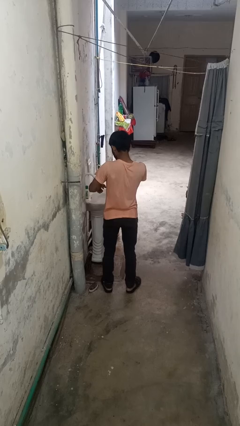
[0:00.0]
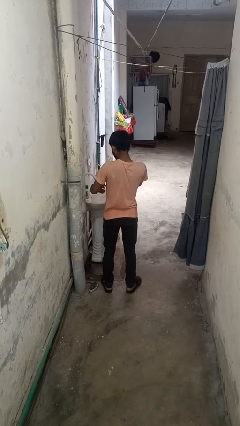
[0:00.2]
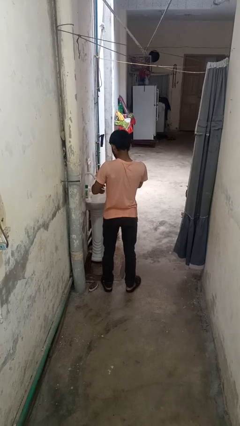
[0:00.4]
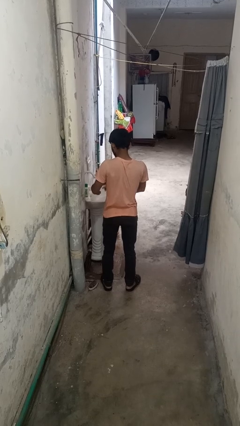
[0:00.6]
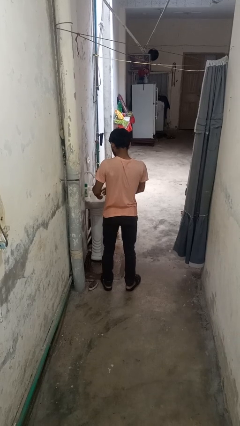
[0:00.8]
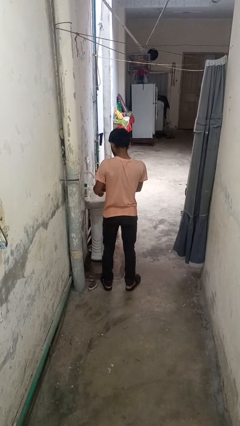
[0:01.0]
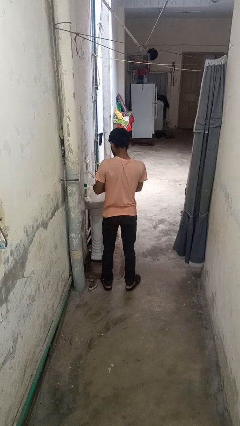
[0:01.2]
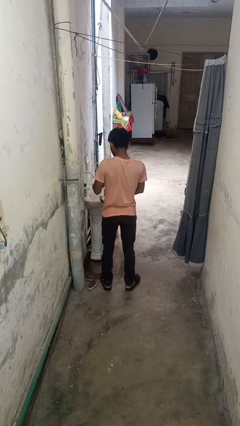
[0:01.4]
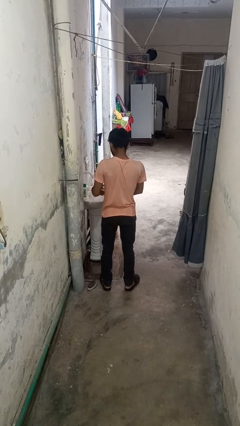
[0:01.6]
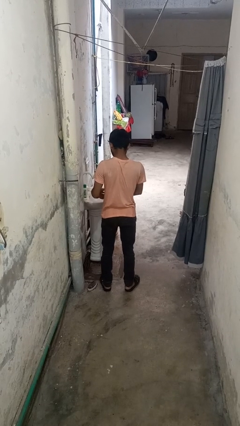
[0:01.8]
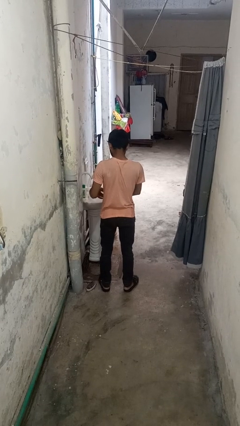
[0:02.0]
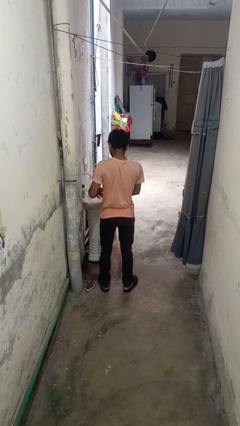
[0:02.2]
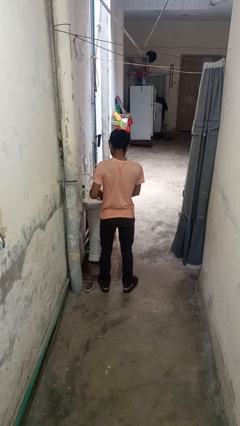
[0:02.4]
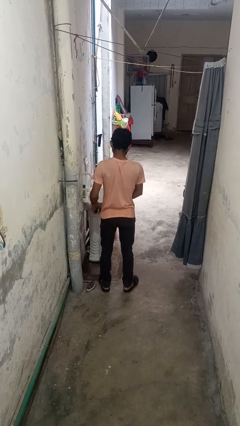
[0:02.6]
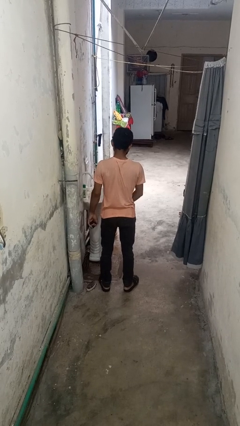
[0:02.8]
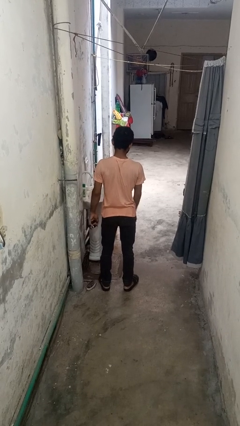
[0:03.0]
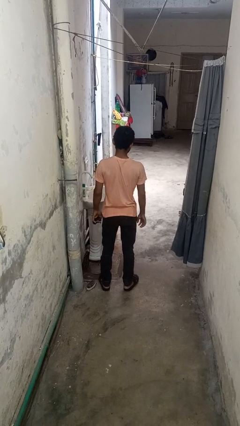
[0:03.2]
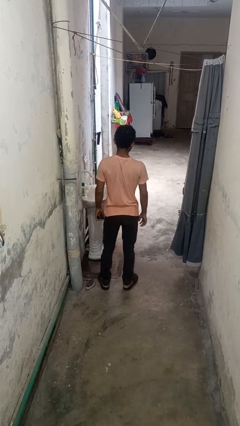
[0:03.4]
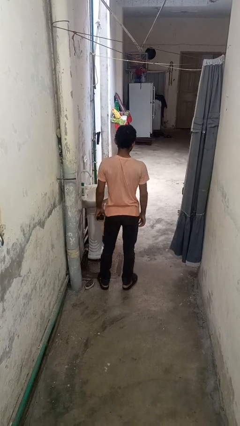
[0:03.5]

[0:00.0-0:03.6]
person takes off wristwatch

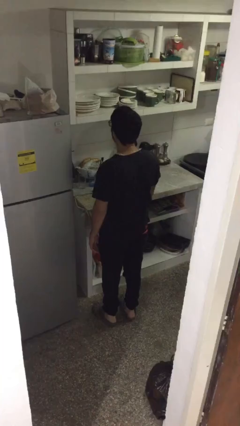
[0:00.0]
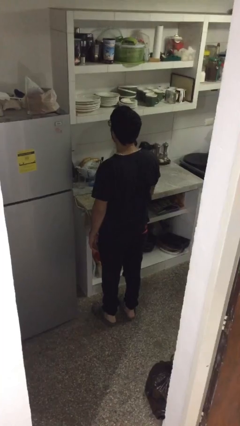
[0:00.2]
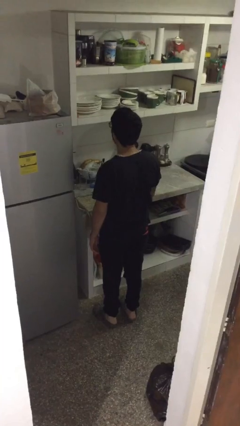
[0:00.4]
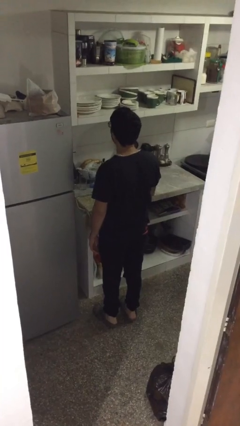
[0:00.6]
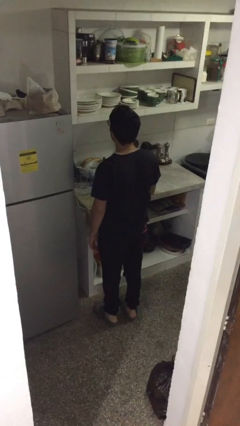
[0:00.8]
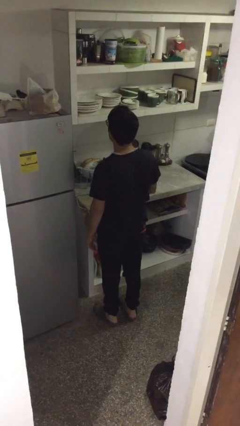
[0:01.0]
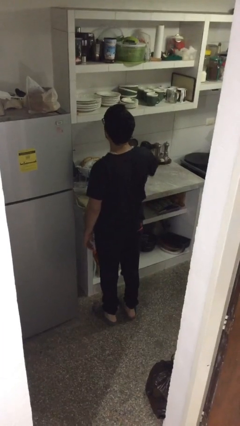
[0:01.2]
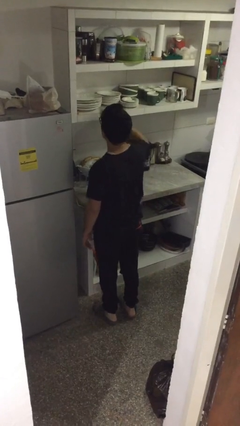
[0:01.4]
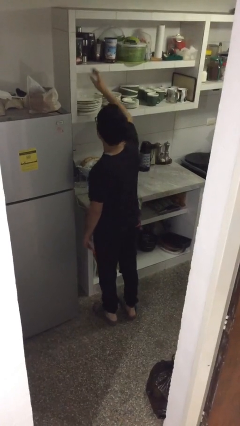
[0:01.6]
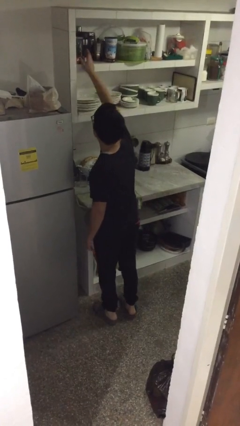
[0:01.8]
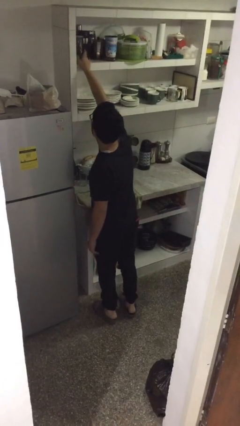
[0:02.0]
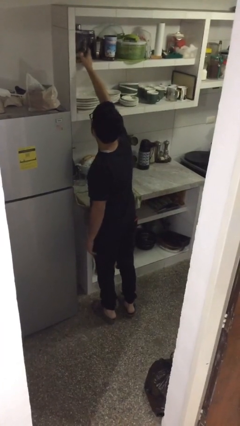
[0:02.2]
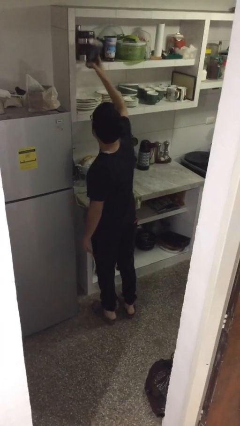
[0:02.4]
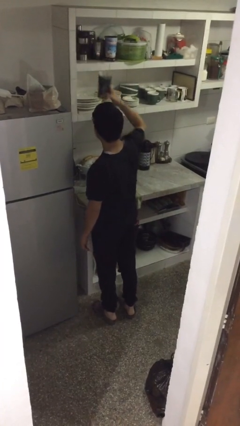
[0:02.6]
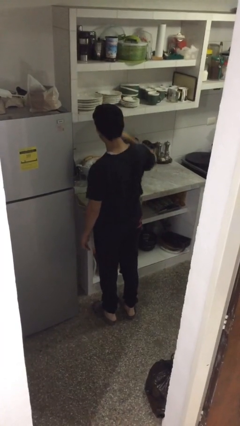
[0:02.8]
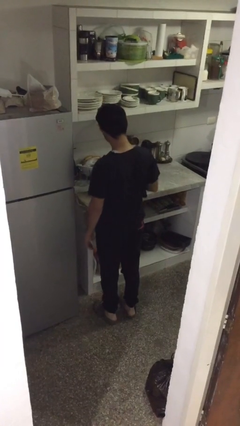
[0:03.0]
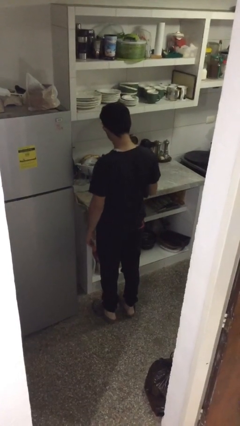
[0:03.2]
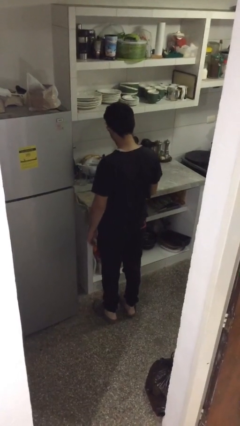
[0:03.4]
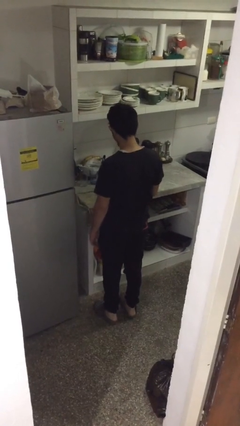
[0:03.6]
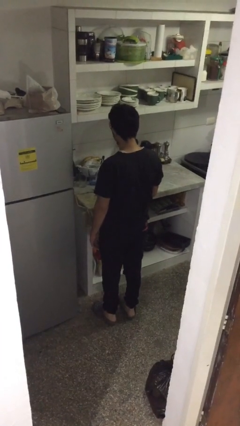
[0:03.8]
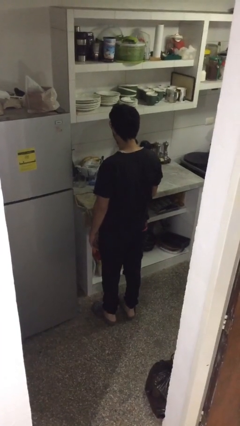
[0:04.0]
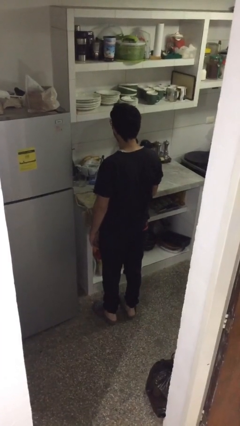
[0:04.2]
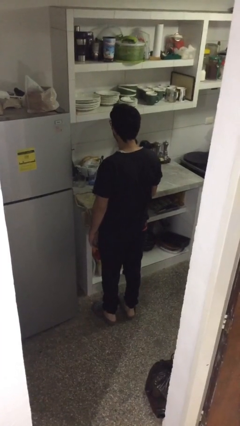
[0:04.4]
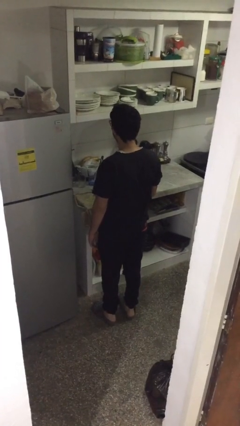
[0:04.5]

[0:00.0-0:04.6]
person picks up object from shelf

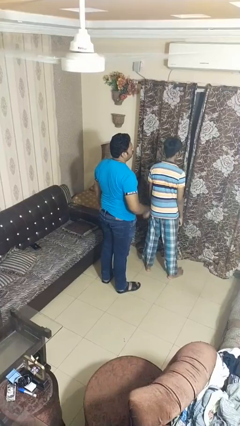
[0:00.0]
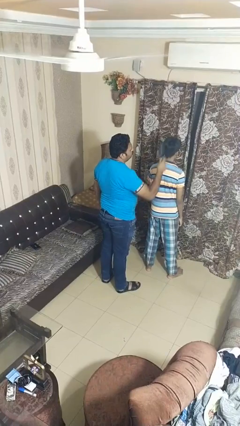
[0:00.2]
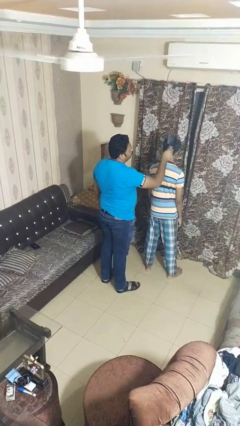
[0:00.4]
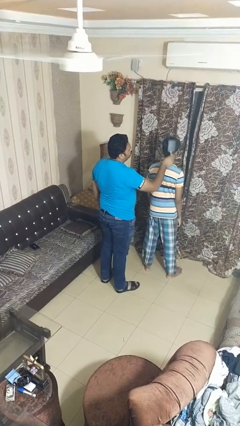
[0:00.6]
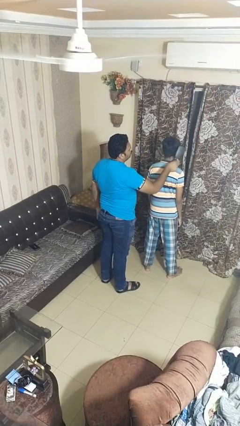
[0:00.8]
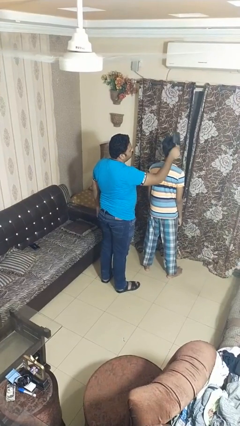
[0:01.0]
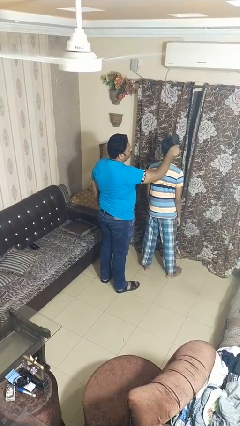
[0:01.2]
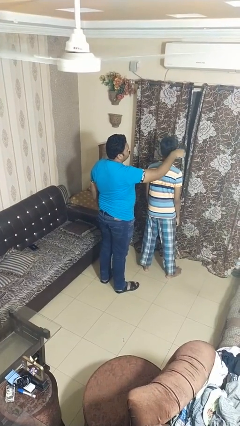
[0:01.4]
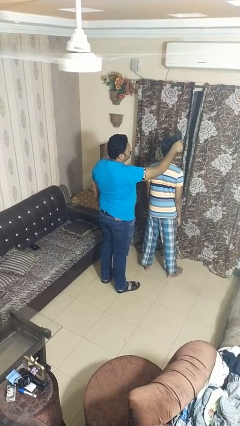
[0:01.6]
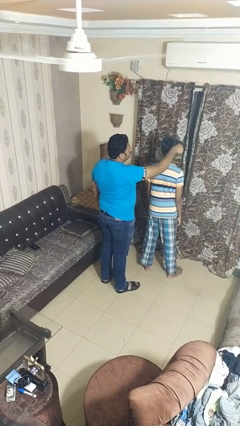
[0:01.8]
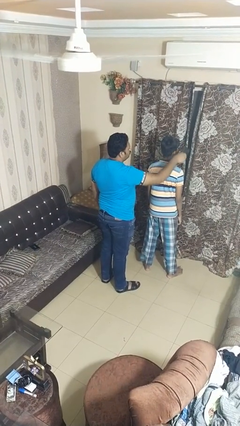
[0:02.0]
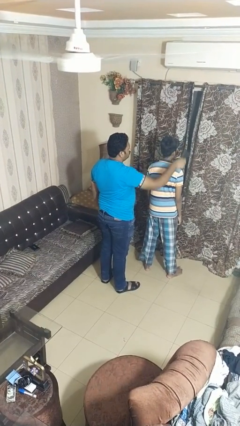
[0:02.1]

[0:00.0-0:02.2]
person brushes hair of person

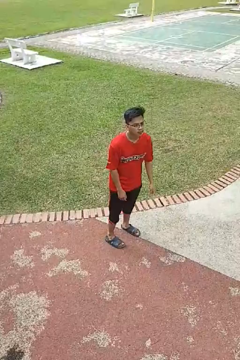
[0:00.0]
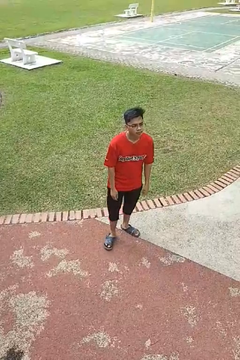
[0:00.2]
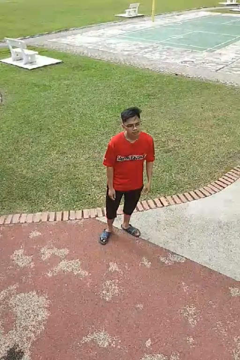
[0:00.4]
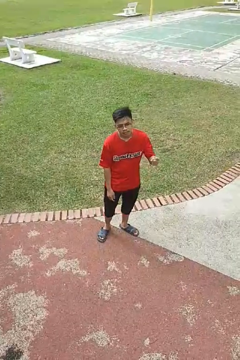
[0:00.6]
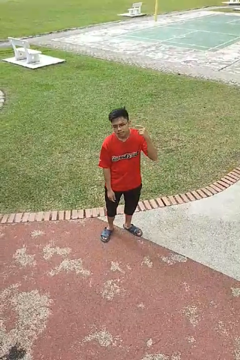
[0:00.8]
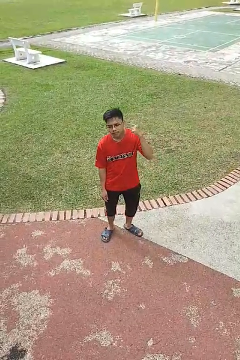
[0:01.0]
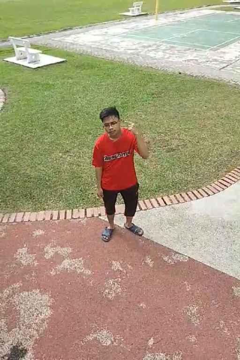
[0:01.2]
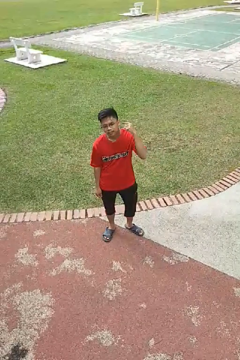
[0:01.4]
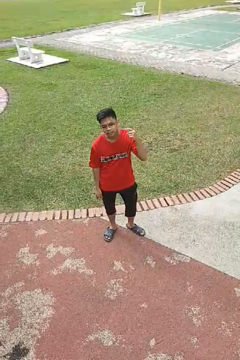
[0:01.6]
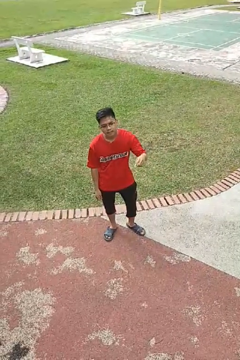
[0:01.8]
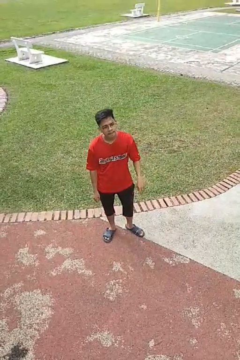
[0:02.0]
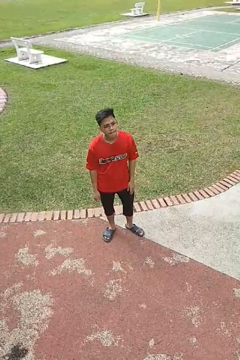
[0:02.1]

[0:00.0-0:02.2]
person gestures listen closely

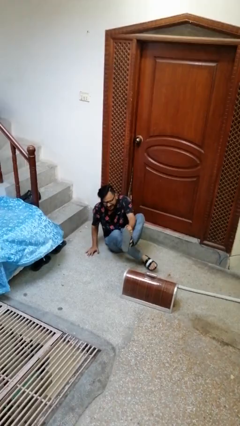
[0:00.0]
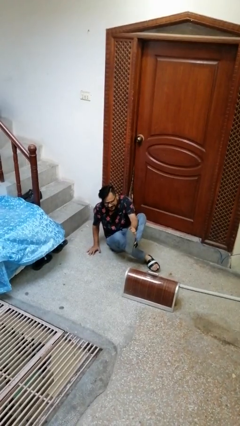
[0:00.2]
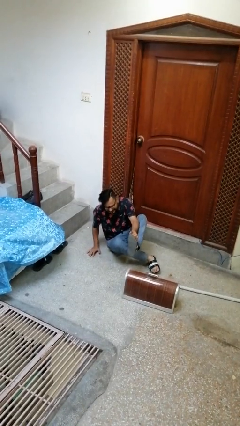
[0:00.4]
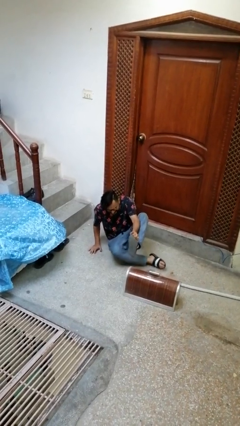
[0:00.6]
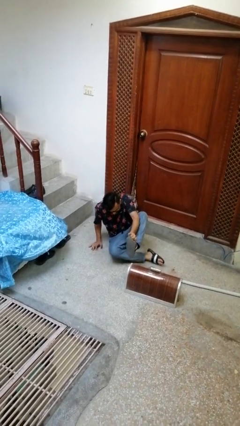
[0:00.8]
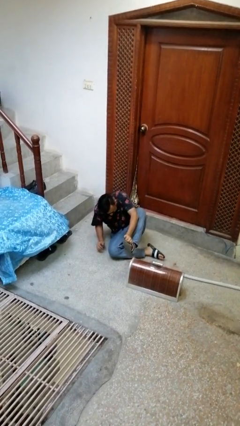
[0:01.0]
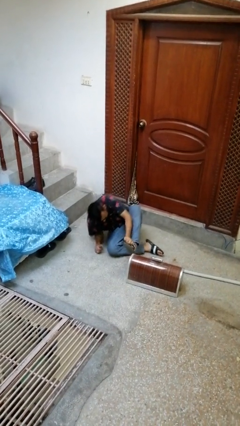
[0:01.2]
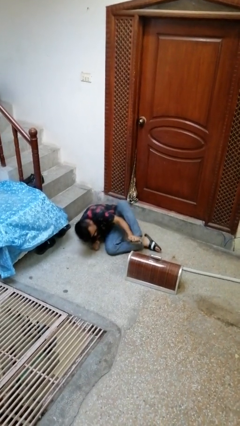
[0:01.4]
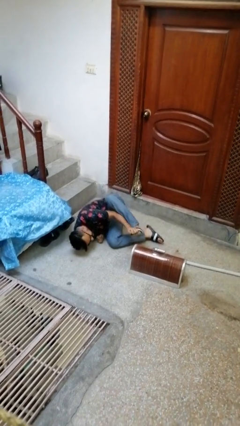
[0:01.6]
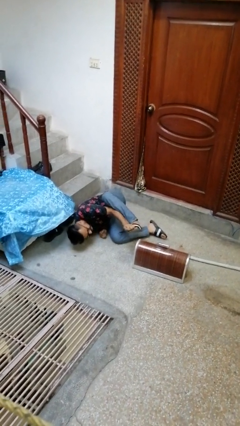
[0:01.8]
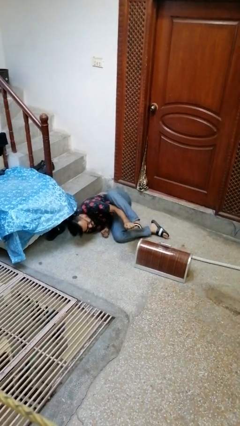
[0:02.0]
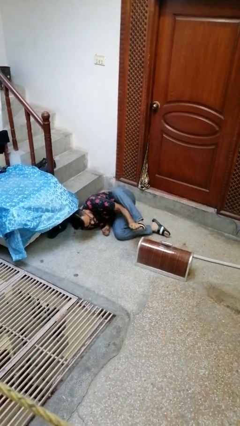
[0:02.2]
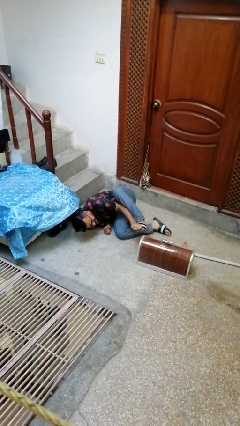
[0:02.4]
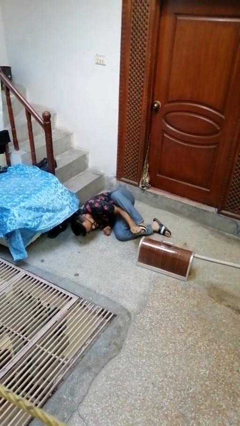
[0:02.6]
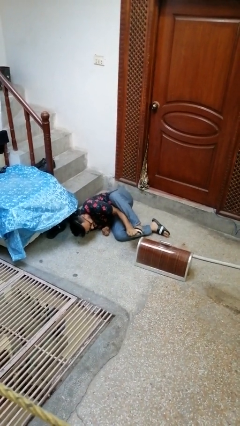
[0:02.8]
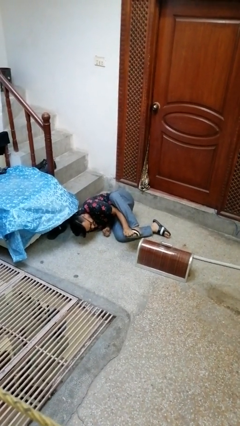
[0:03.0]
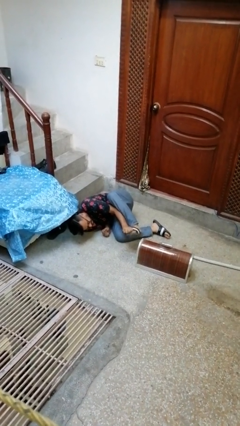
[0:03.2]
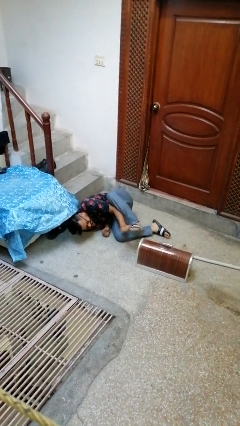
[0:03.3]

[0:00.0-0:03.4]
person lies down on floor

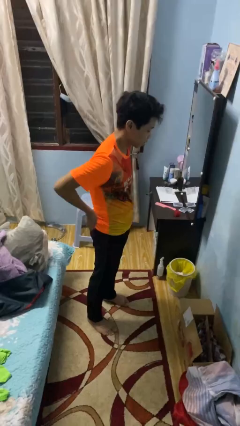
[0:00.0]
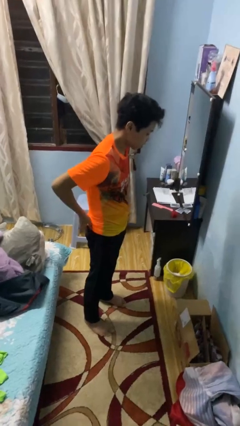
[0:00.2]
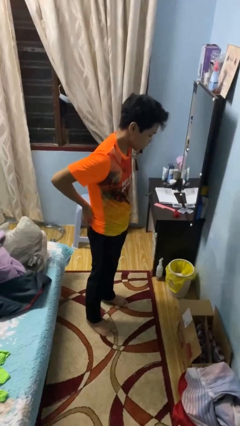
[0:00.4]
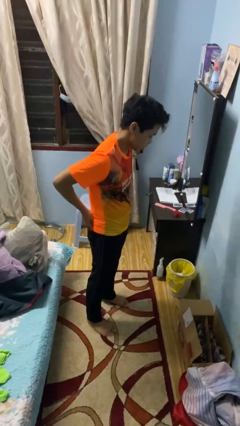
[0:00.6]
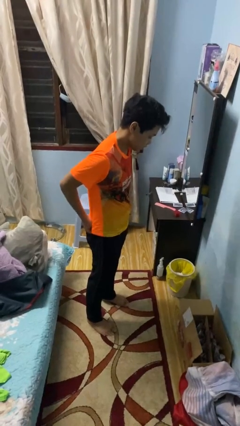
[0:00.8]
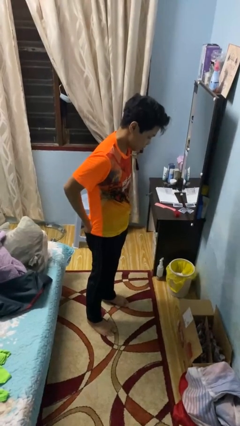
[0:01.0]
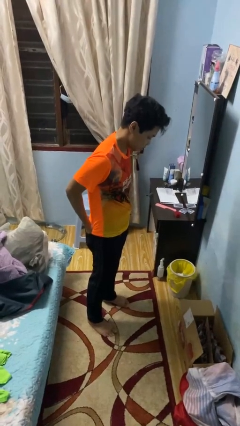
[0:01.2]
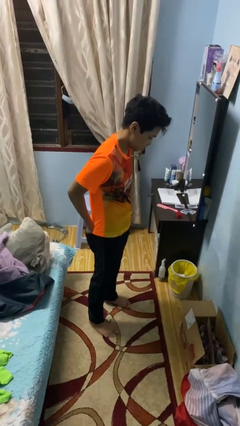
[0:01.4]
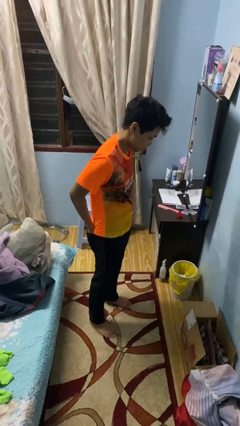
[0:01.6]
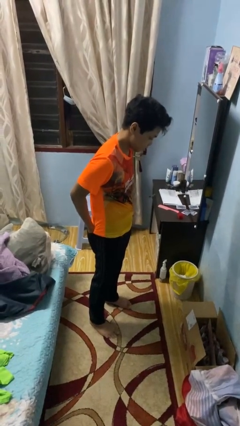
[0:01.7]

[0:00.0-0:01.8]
person puts hands in back pockets
